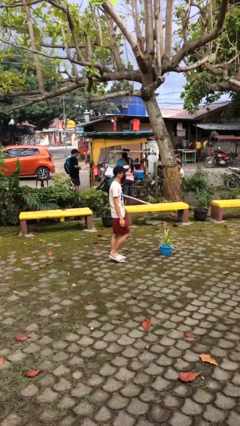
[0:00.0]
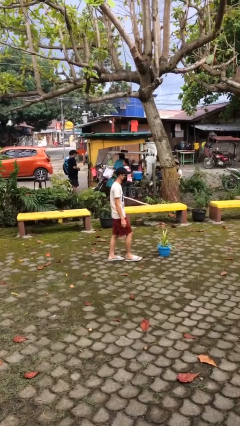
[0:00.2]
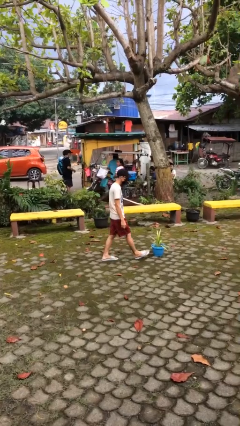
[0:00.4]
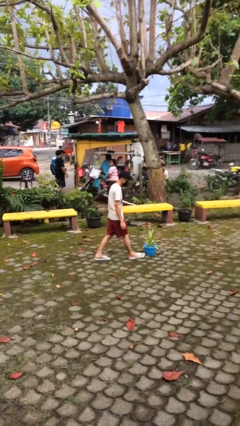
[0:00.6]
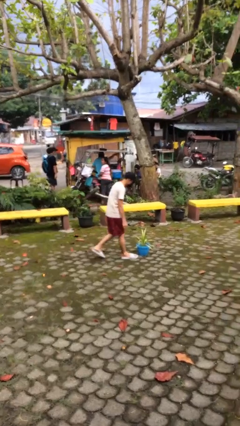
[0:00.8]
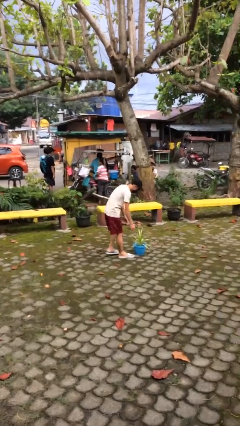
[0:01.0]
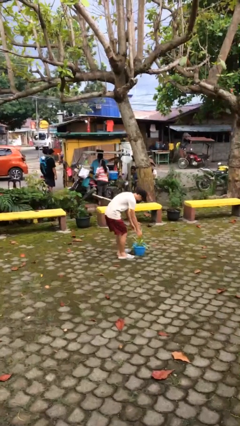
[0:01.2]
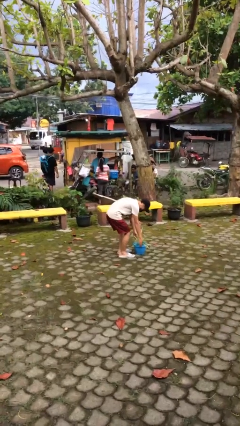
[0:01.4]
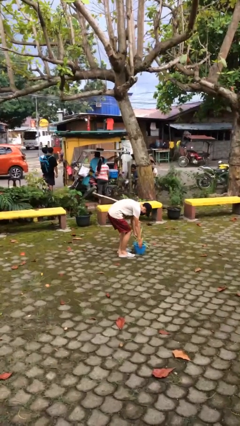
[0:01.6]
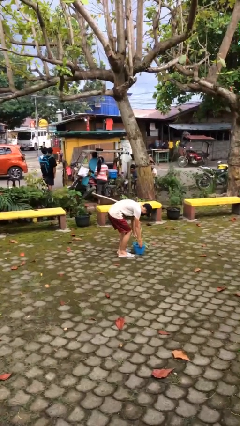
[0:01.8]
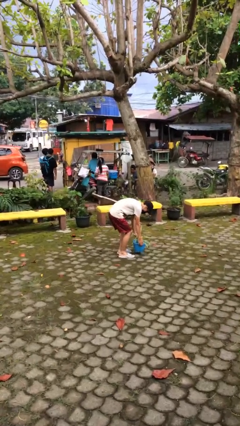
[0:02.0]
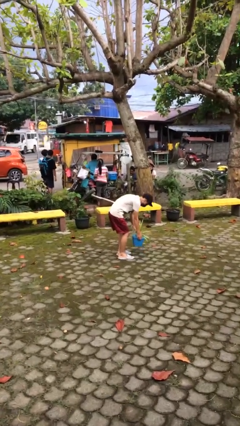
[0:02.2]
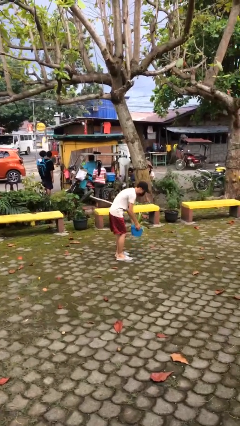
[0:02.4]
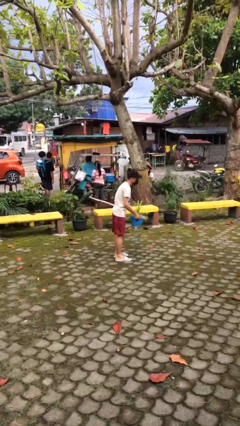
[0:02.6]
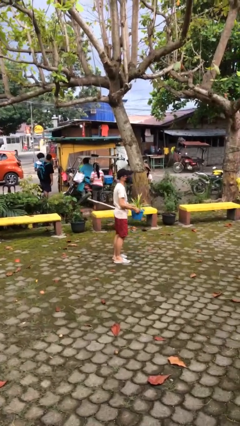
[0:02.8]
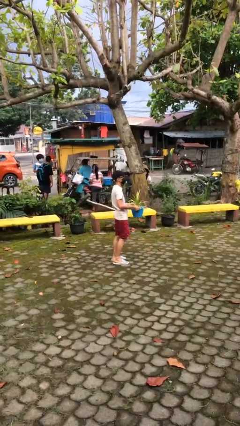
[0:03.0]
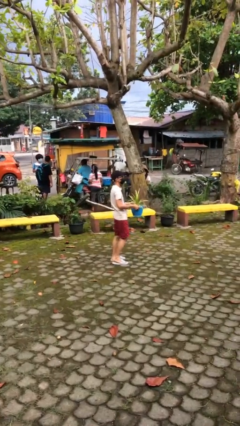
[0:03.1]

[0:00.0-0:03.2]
person picks up object from floor

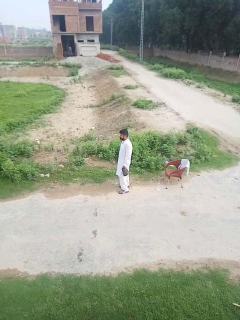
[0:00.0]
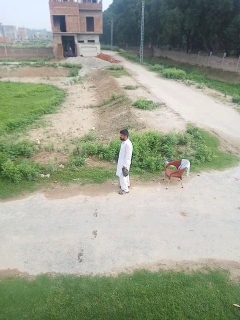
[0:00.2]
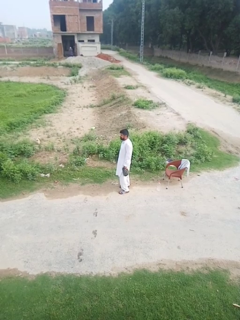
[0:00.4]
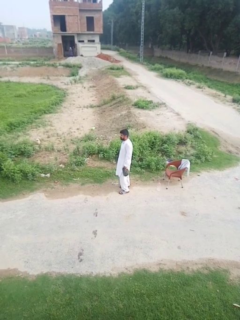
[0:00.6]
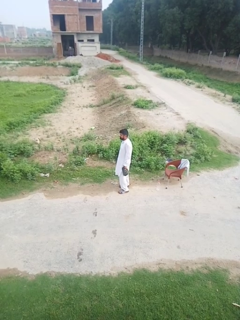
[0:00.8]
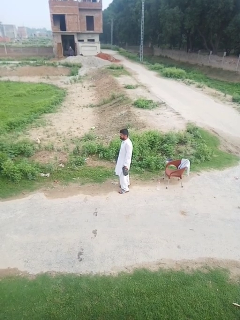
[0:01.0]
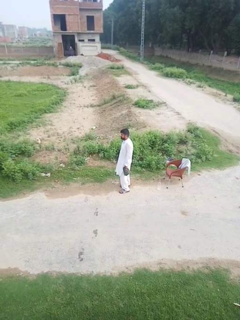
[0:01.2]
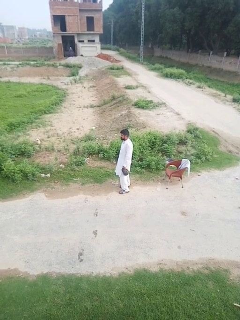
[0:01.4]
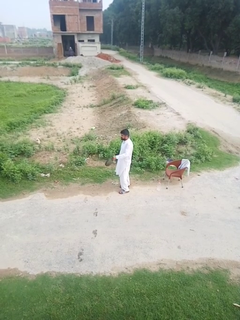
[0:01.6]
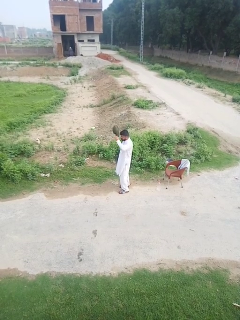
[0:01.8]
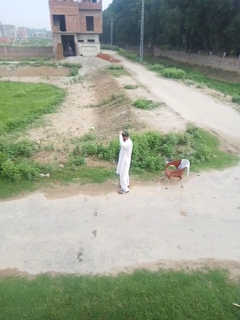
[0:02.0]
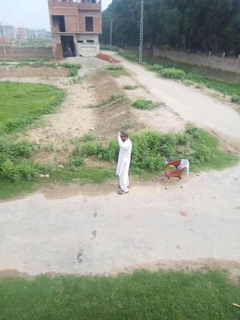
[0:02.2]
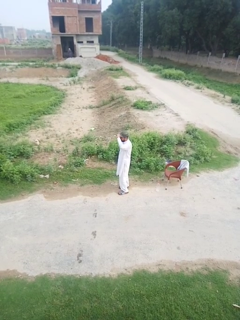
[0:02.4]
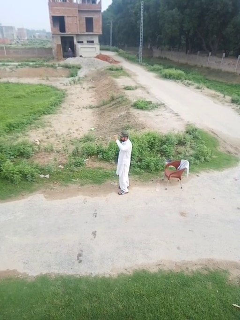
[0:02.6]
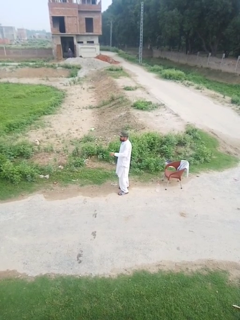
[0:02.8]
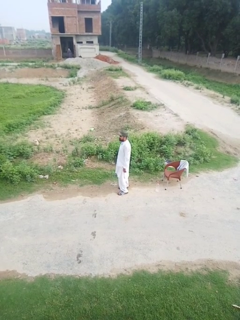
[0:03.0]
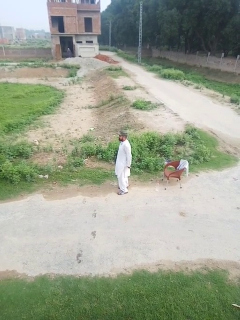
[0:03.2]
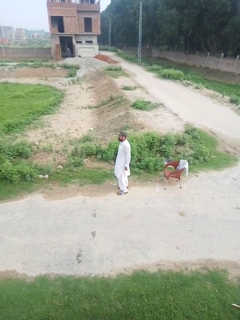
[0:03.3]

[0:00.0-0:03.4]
person puts on hat

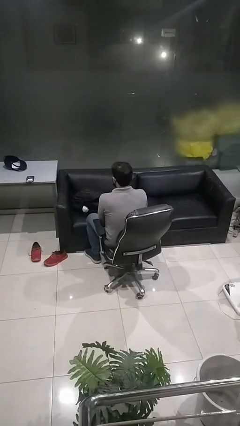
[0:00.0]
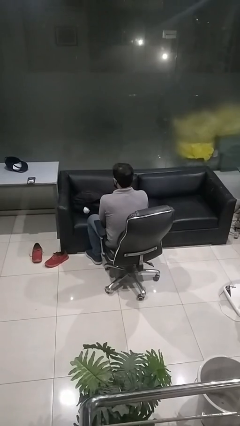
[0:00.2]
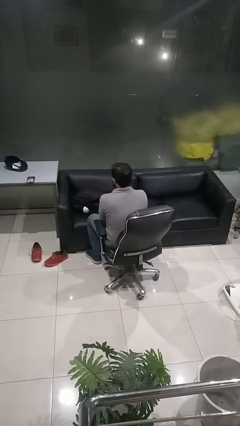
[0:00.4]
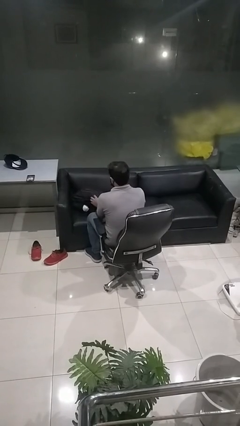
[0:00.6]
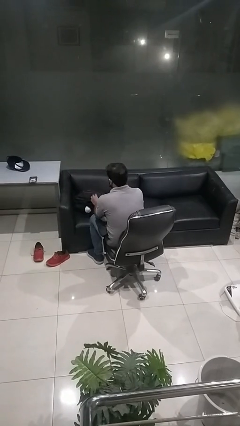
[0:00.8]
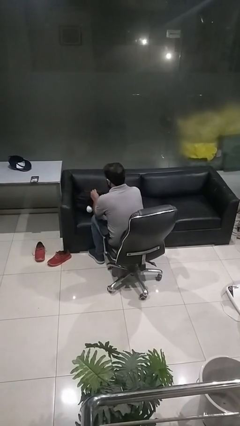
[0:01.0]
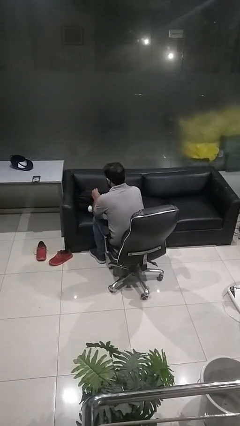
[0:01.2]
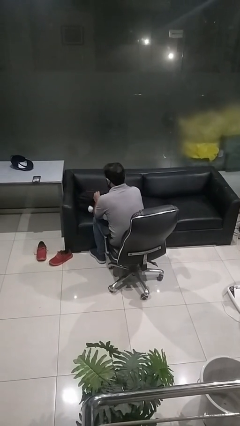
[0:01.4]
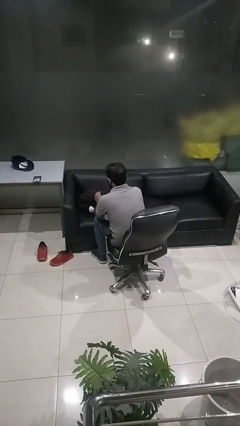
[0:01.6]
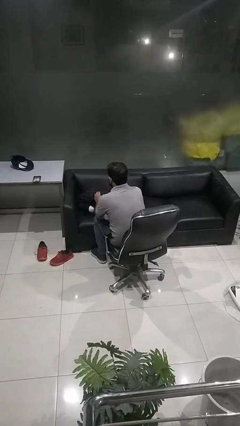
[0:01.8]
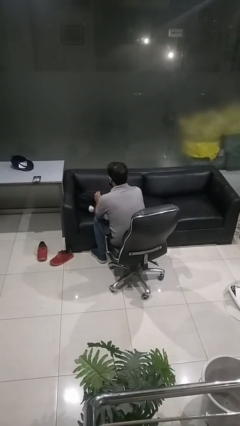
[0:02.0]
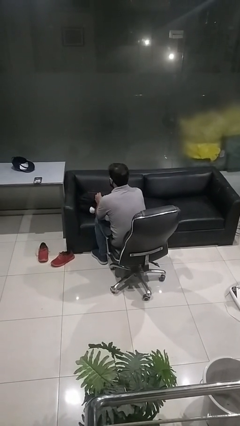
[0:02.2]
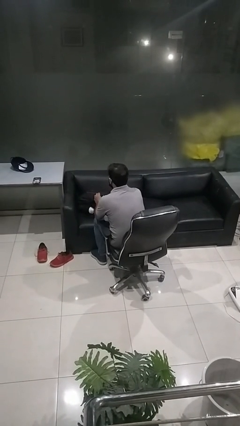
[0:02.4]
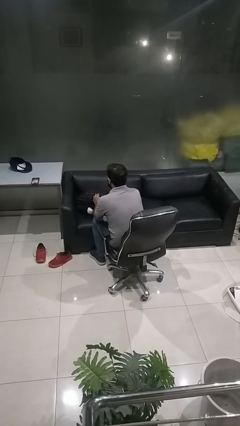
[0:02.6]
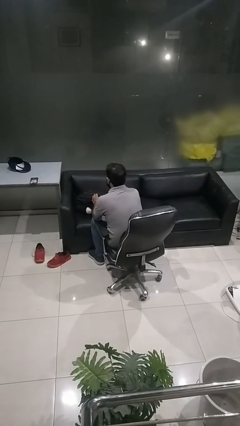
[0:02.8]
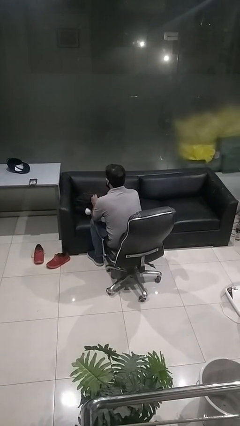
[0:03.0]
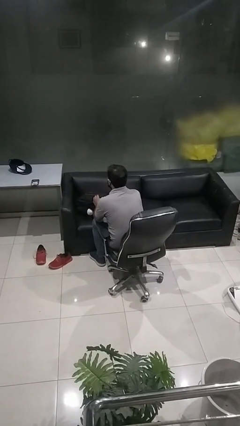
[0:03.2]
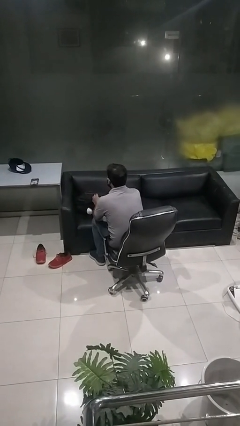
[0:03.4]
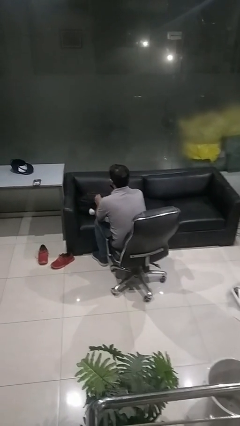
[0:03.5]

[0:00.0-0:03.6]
person searches in backpack

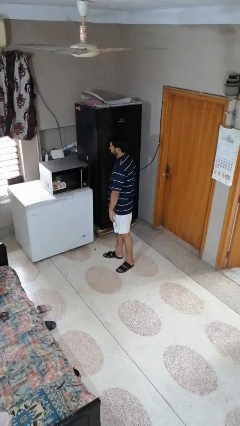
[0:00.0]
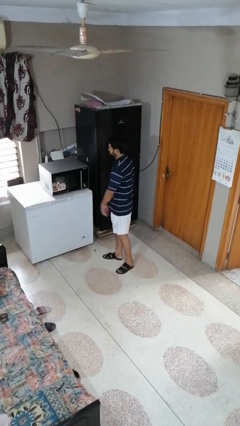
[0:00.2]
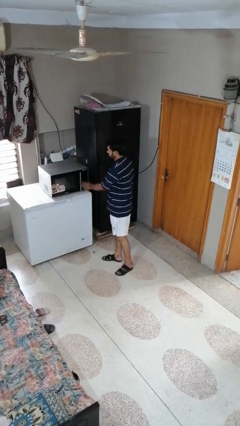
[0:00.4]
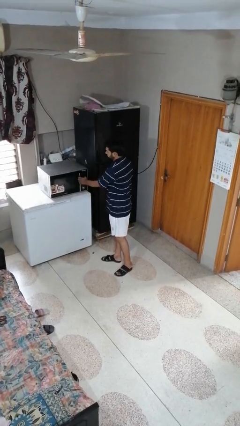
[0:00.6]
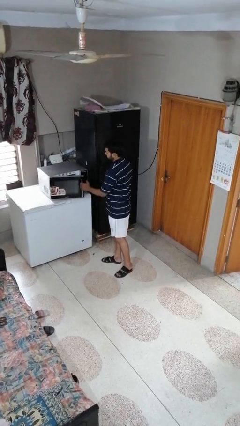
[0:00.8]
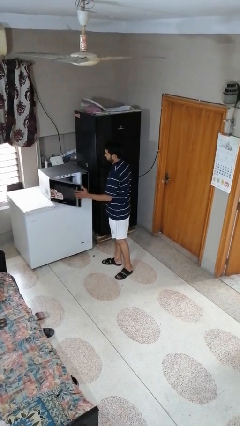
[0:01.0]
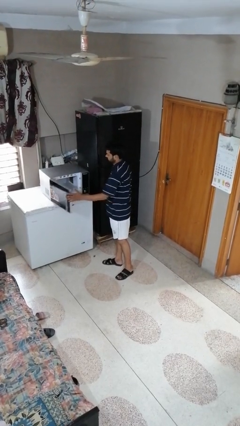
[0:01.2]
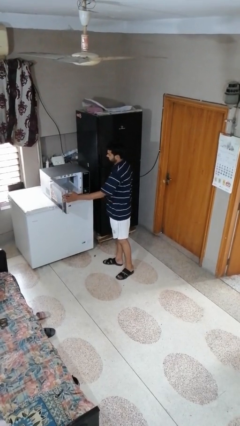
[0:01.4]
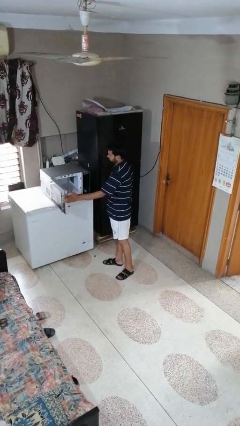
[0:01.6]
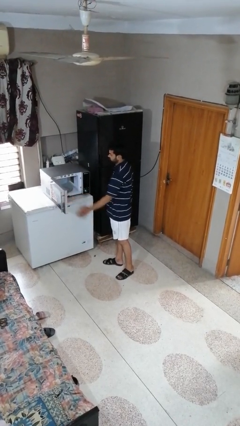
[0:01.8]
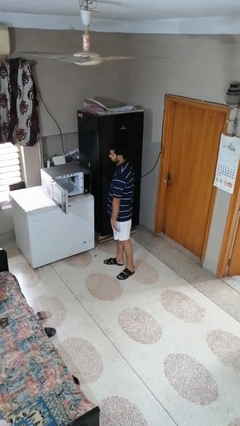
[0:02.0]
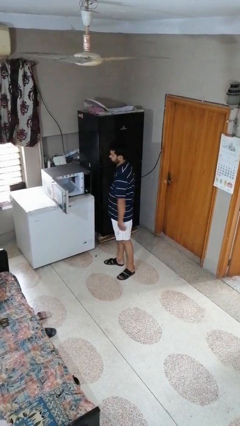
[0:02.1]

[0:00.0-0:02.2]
person opens microwave

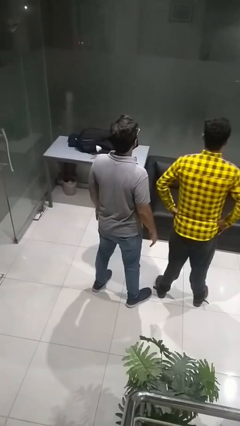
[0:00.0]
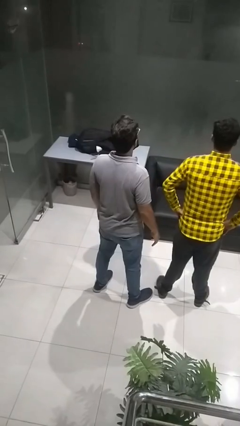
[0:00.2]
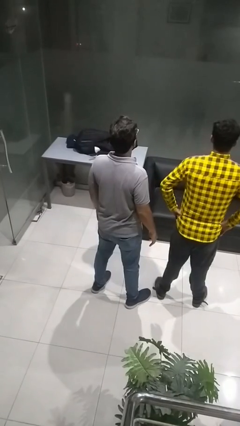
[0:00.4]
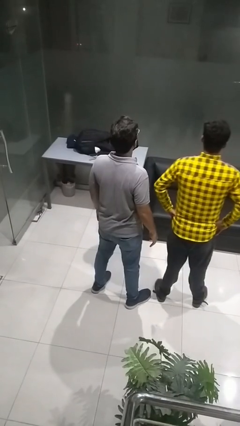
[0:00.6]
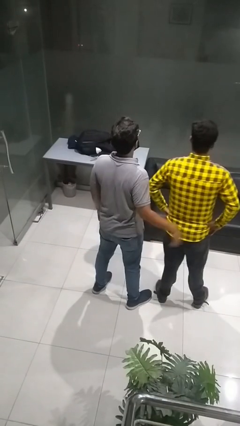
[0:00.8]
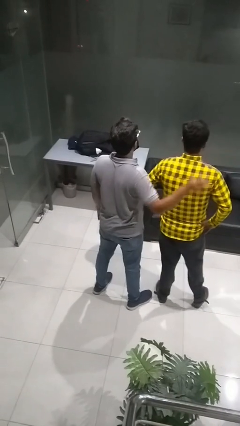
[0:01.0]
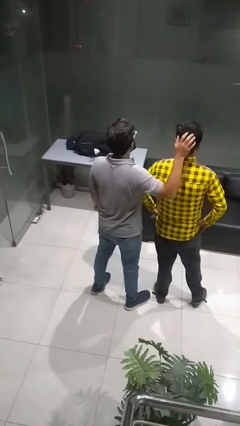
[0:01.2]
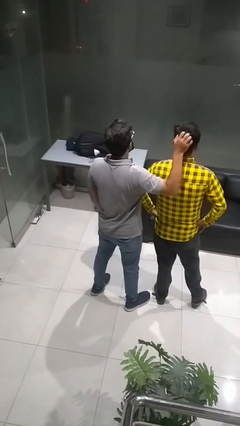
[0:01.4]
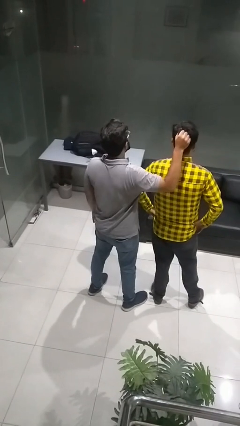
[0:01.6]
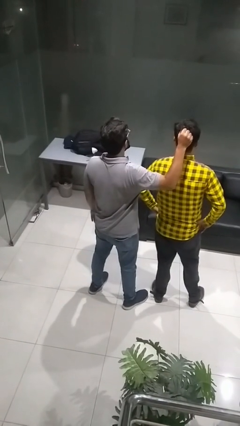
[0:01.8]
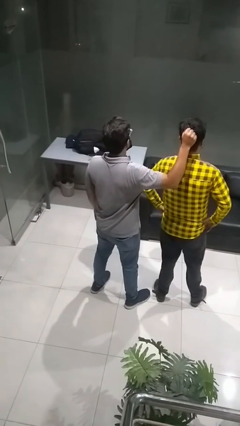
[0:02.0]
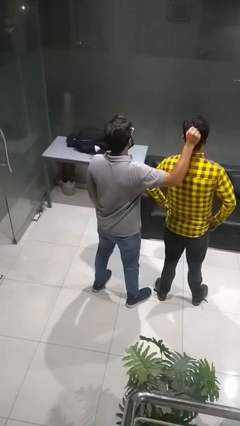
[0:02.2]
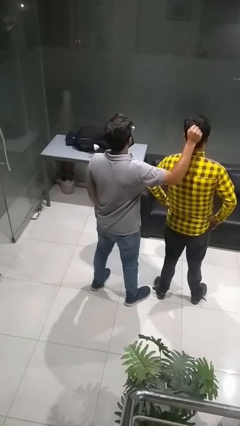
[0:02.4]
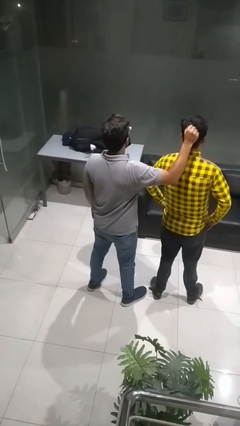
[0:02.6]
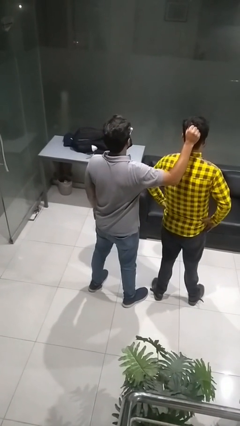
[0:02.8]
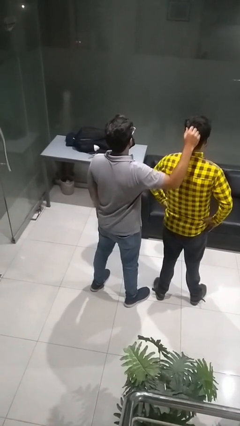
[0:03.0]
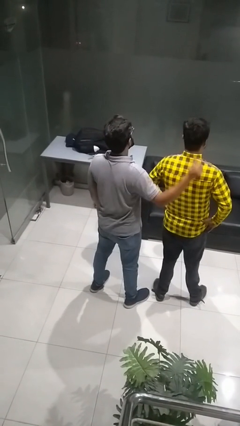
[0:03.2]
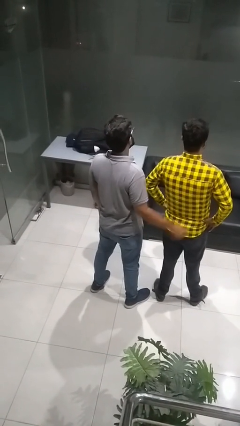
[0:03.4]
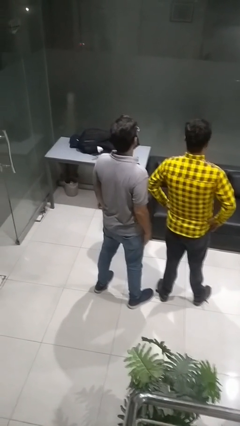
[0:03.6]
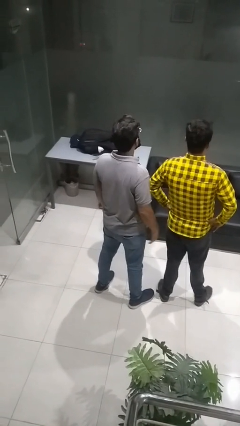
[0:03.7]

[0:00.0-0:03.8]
person grabs person by hair

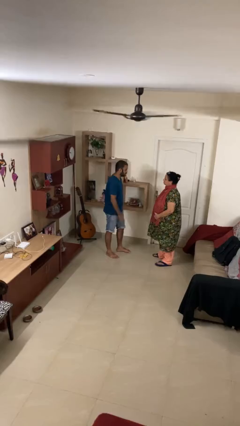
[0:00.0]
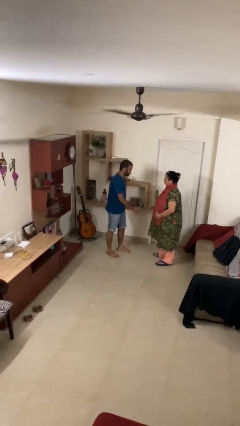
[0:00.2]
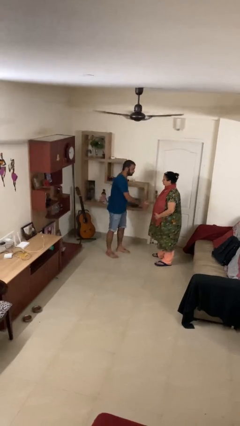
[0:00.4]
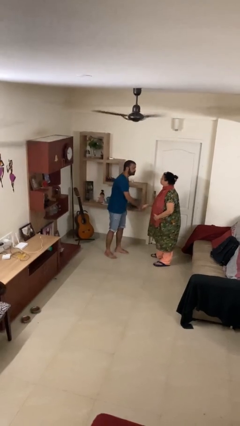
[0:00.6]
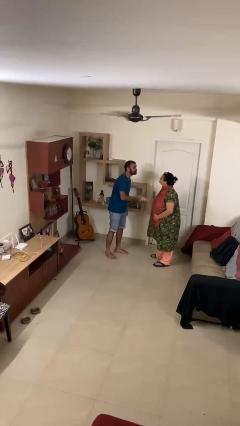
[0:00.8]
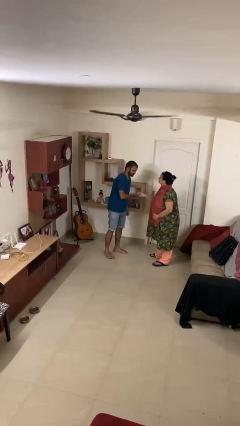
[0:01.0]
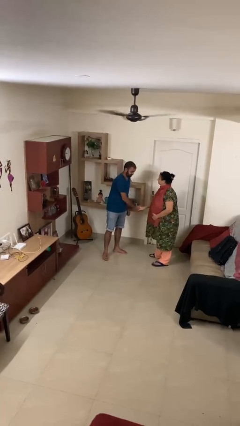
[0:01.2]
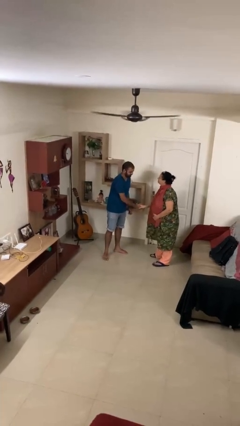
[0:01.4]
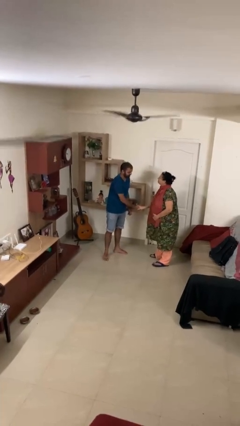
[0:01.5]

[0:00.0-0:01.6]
person shakes hand

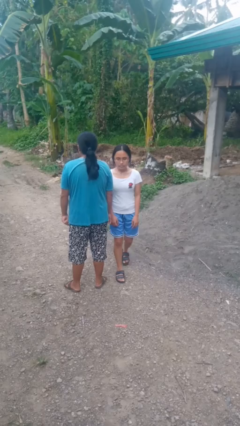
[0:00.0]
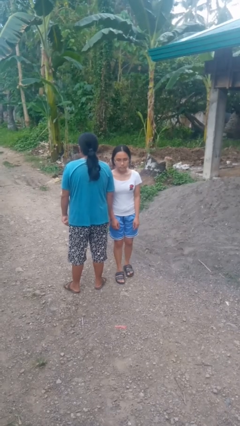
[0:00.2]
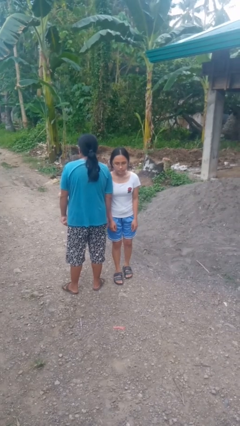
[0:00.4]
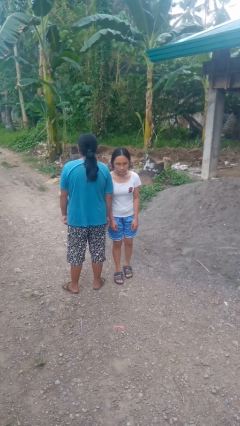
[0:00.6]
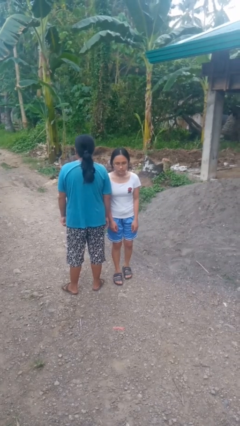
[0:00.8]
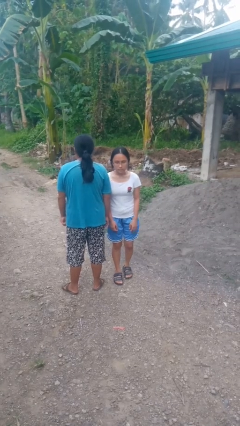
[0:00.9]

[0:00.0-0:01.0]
person bumps into person
